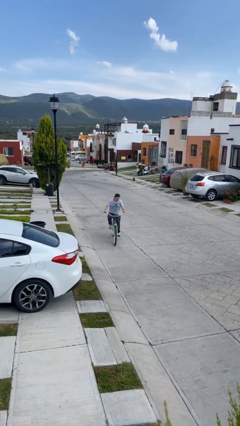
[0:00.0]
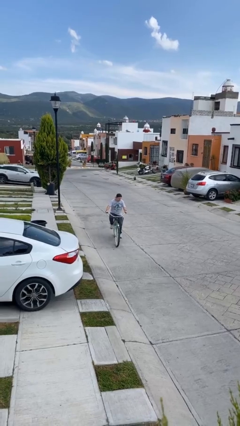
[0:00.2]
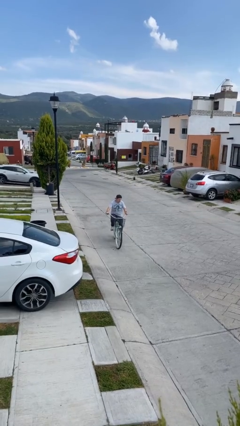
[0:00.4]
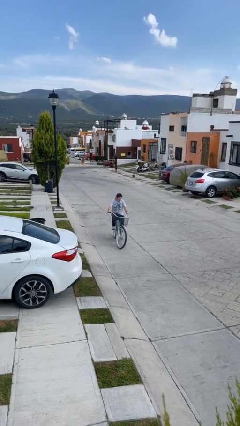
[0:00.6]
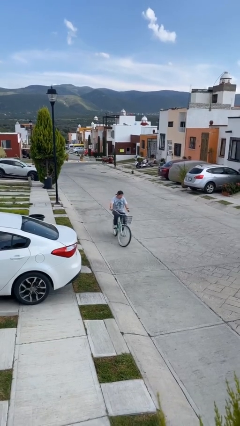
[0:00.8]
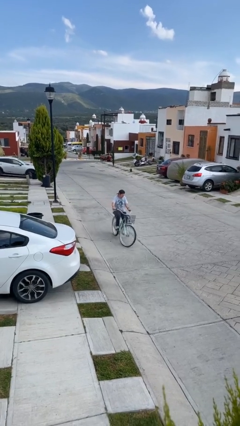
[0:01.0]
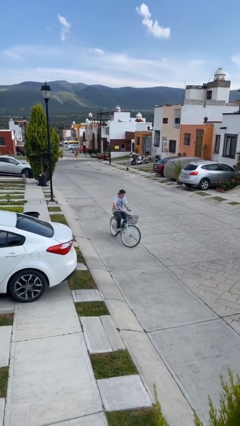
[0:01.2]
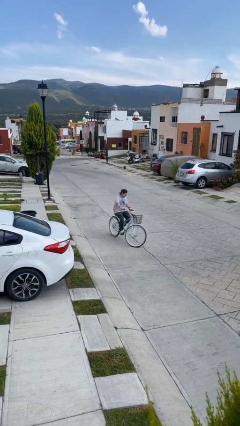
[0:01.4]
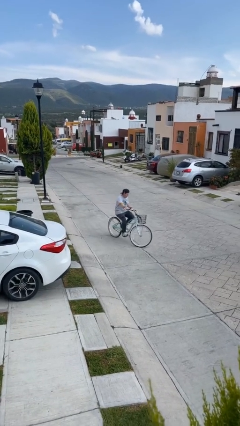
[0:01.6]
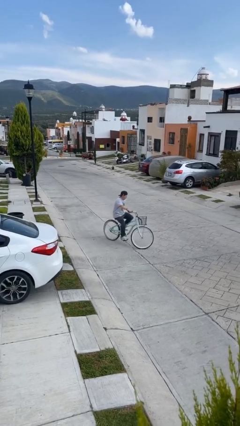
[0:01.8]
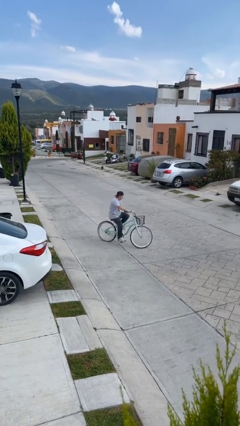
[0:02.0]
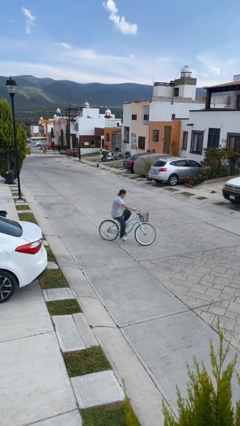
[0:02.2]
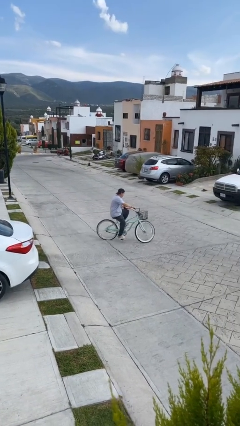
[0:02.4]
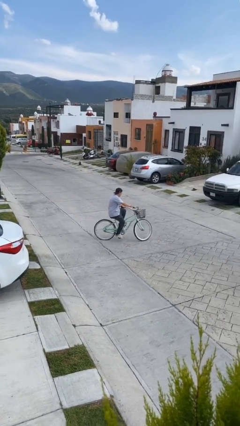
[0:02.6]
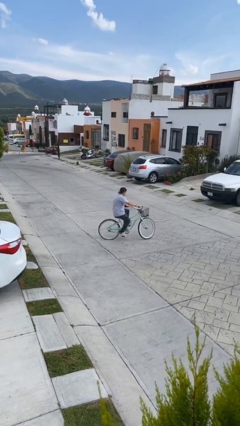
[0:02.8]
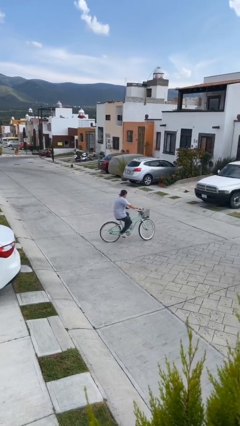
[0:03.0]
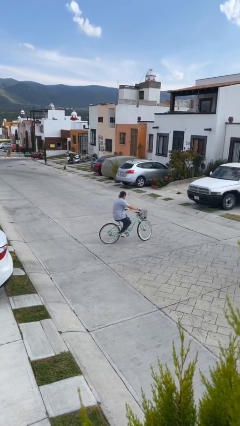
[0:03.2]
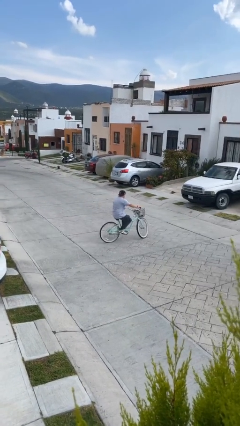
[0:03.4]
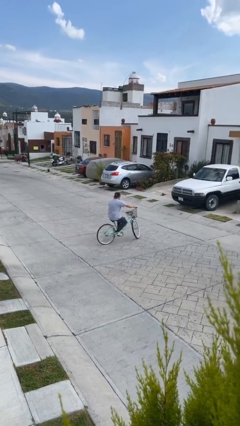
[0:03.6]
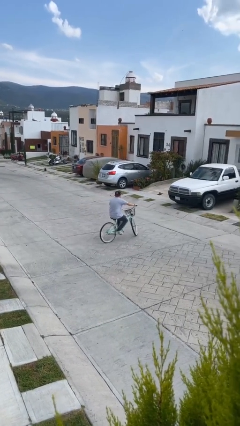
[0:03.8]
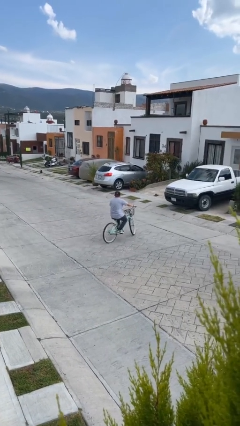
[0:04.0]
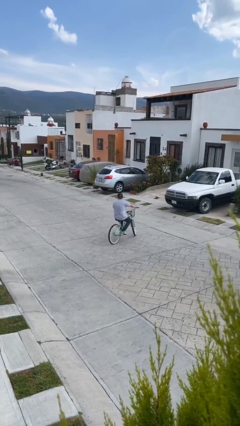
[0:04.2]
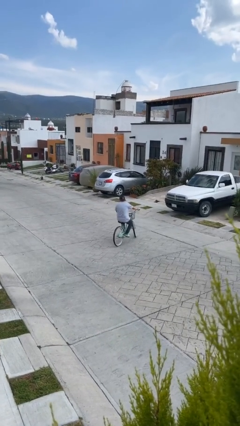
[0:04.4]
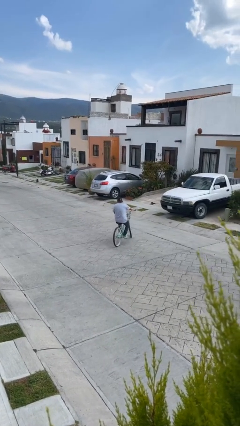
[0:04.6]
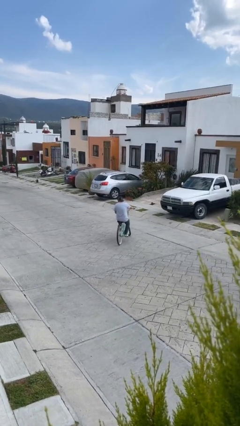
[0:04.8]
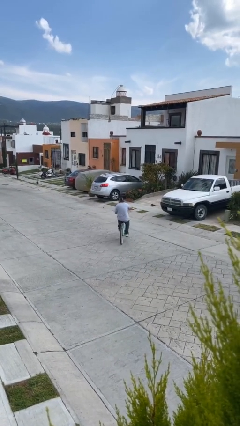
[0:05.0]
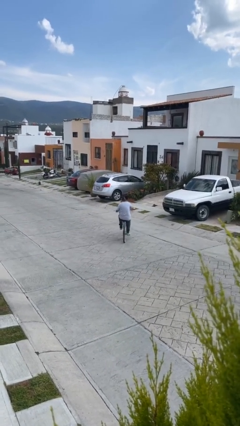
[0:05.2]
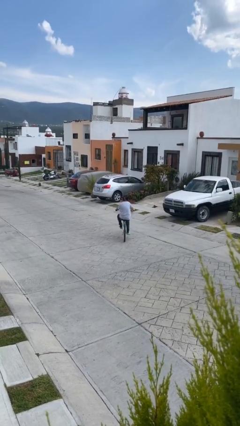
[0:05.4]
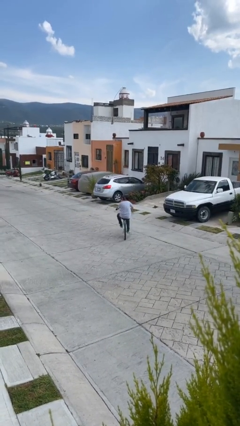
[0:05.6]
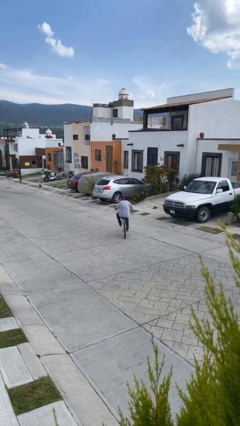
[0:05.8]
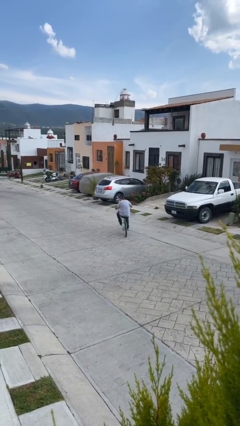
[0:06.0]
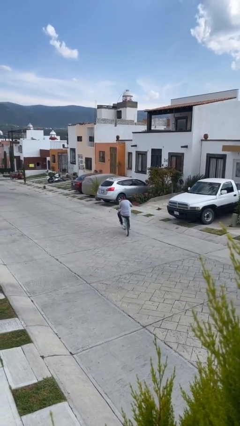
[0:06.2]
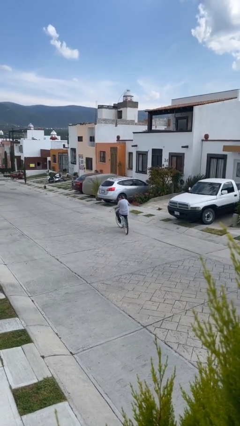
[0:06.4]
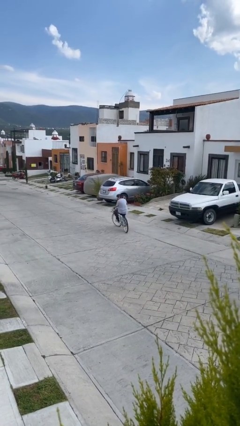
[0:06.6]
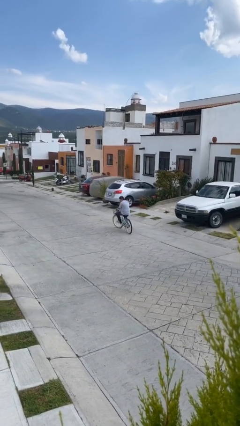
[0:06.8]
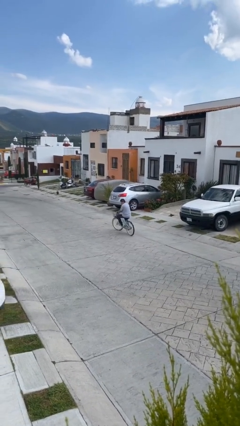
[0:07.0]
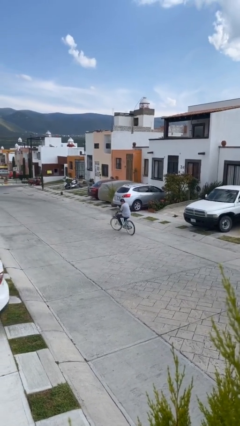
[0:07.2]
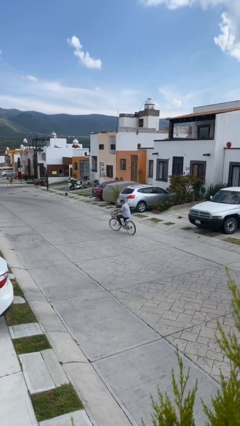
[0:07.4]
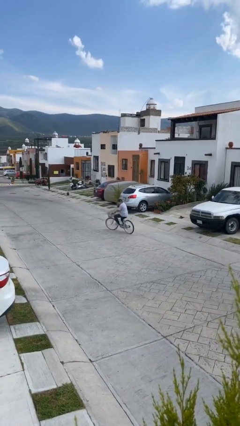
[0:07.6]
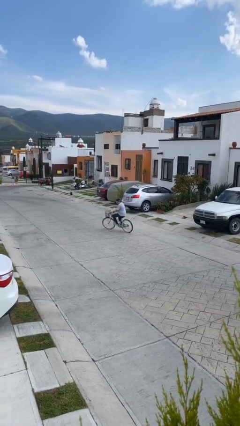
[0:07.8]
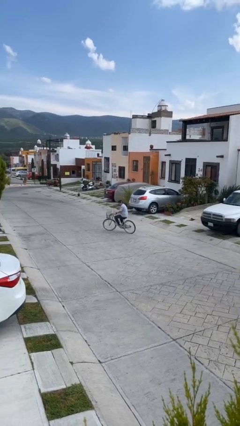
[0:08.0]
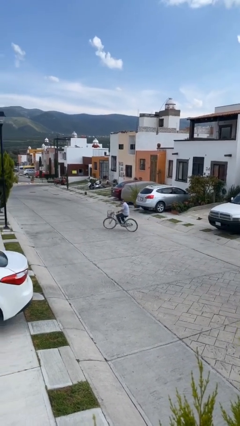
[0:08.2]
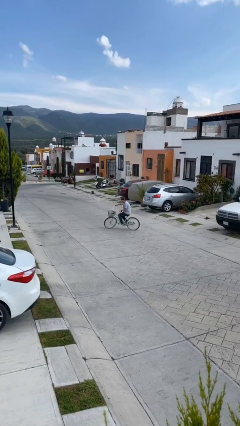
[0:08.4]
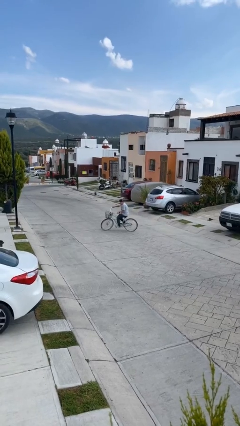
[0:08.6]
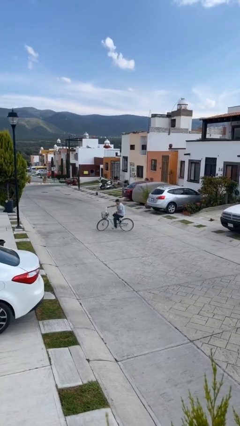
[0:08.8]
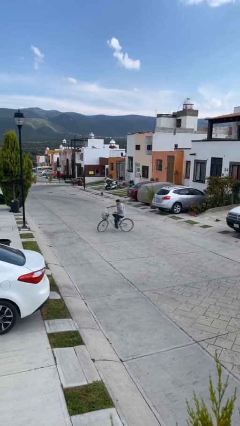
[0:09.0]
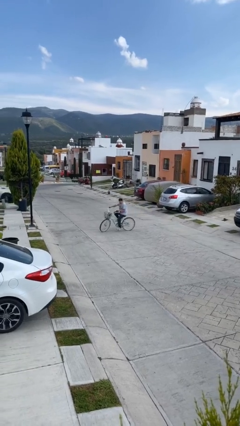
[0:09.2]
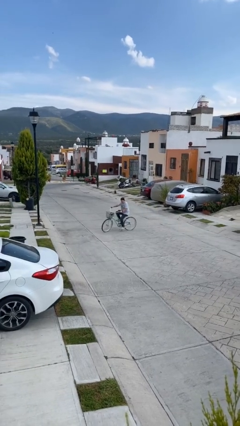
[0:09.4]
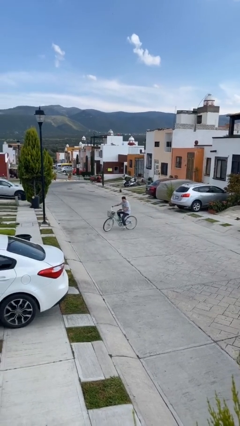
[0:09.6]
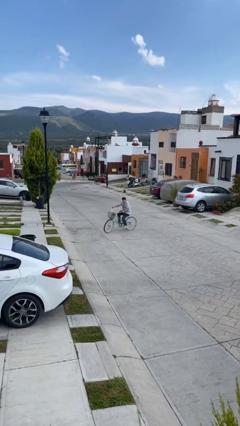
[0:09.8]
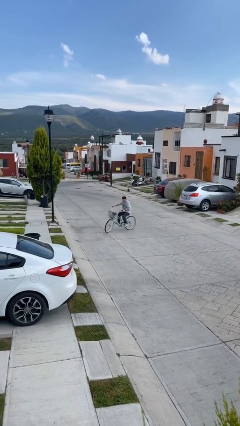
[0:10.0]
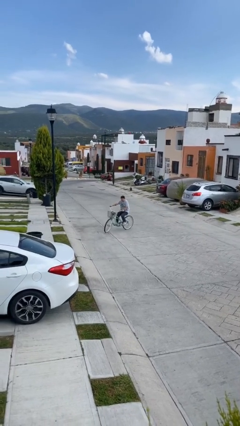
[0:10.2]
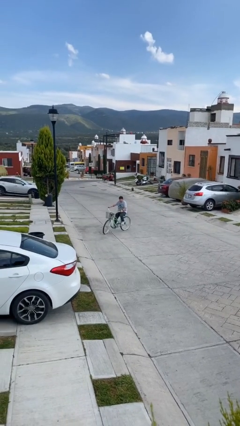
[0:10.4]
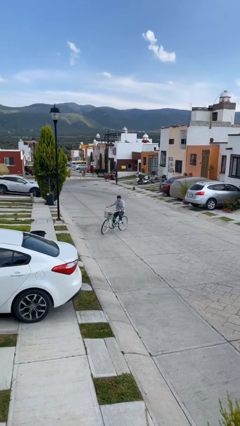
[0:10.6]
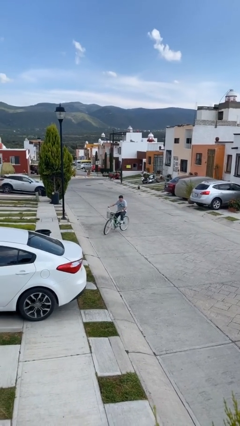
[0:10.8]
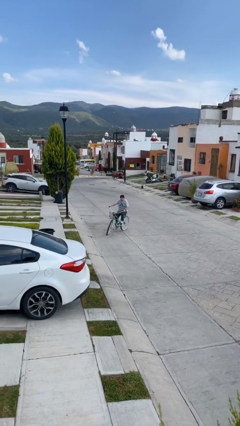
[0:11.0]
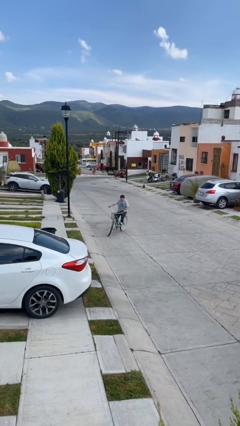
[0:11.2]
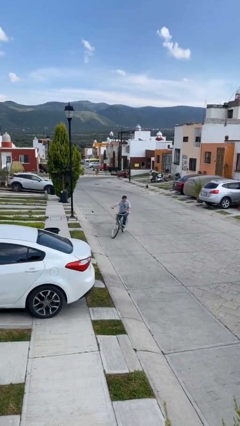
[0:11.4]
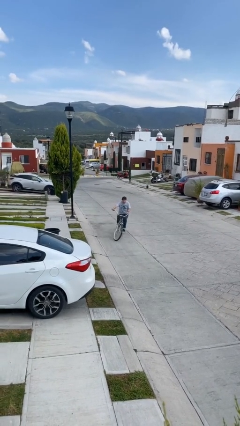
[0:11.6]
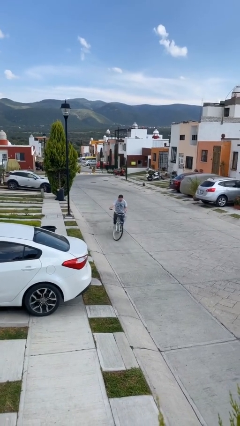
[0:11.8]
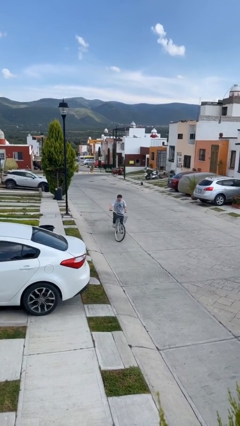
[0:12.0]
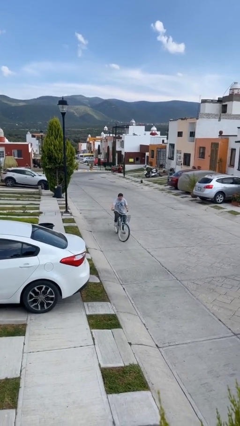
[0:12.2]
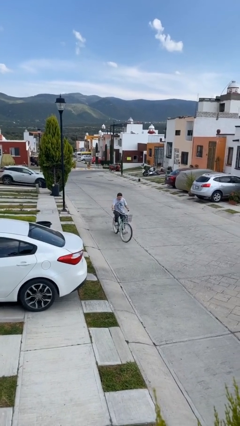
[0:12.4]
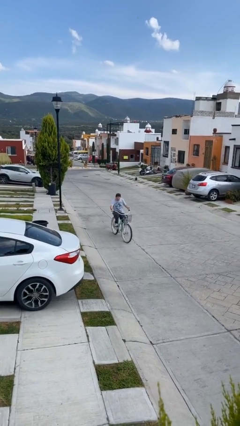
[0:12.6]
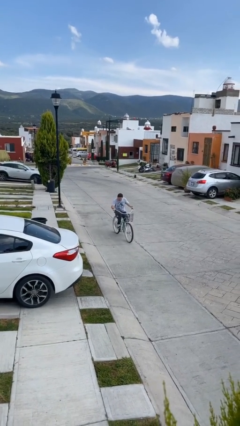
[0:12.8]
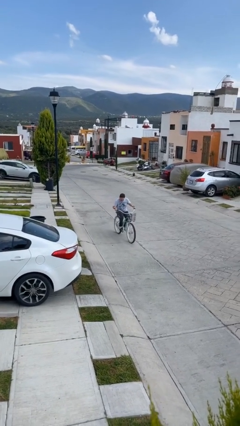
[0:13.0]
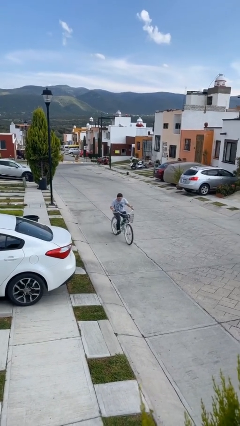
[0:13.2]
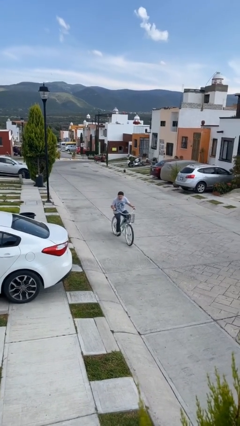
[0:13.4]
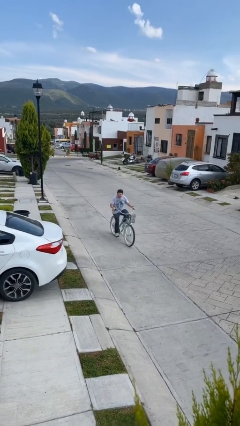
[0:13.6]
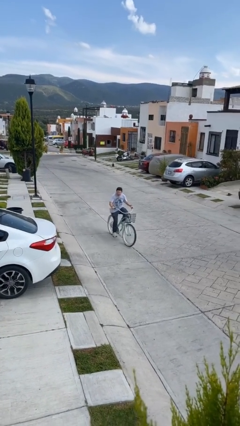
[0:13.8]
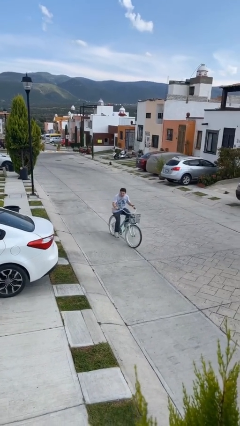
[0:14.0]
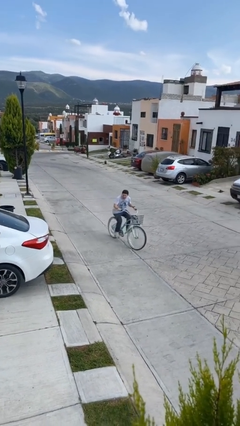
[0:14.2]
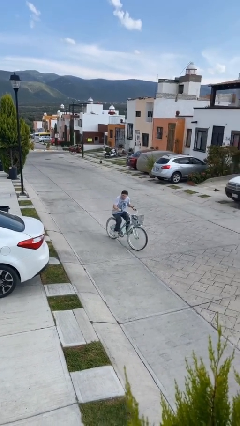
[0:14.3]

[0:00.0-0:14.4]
person rides bicycle

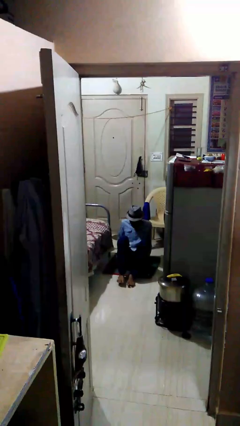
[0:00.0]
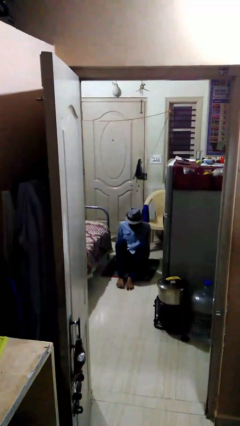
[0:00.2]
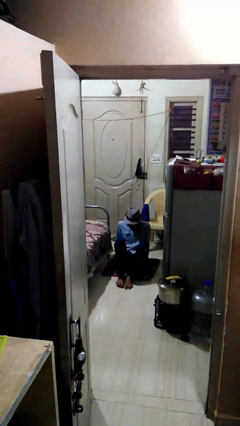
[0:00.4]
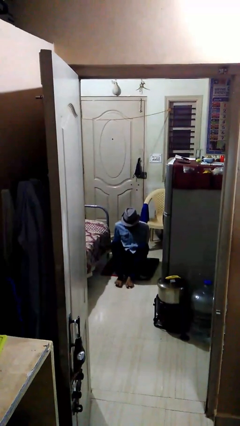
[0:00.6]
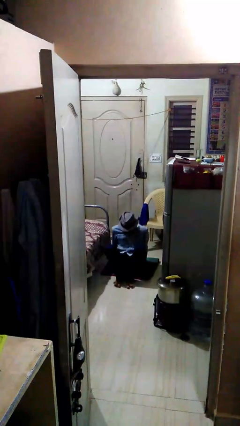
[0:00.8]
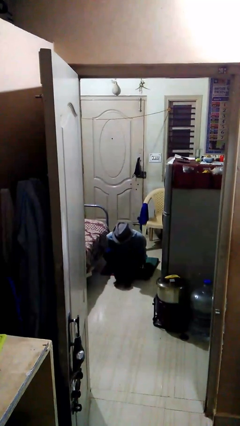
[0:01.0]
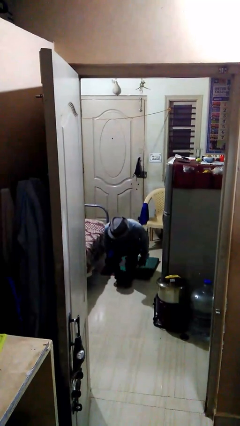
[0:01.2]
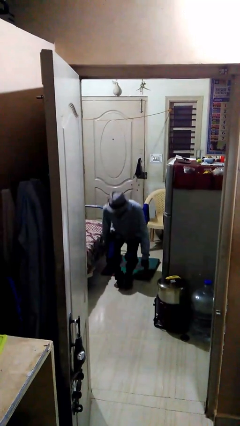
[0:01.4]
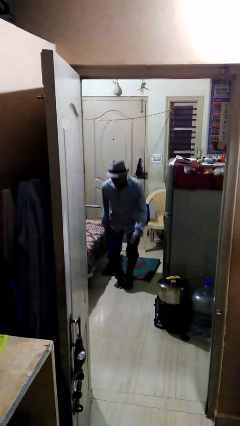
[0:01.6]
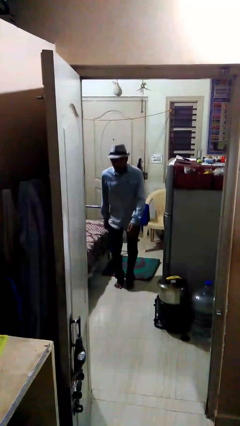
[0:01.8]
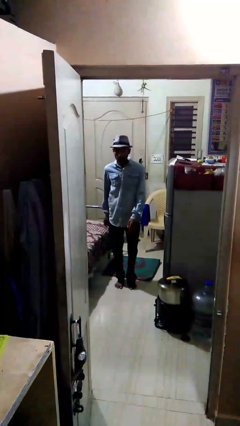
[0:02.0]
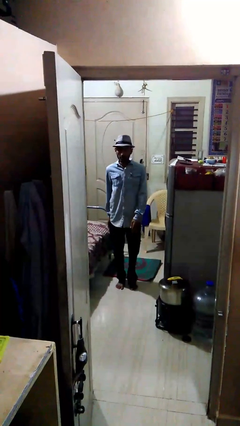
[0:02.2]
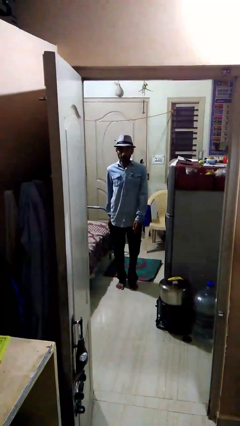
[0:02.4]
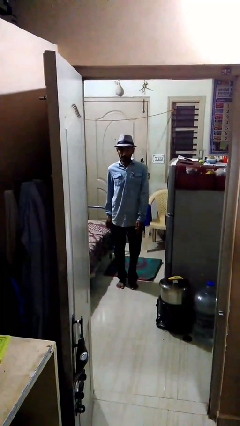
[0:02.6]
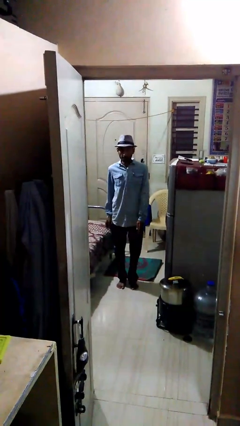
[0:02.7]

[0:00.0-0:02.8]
person stands up

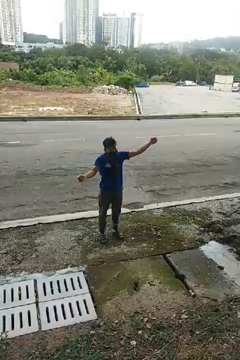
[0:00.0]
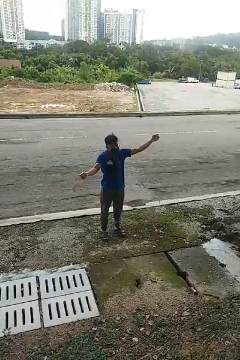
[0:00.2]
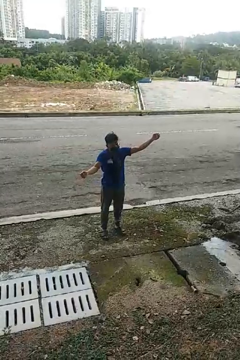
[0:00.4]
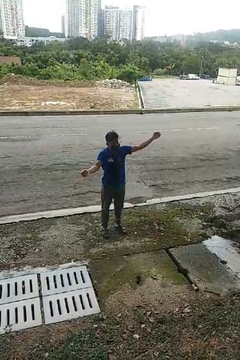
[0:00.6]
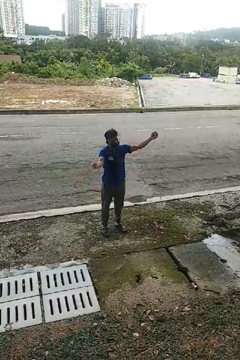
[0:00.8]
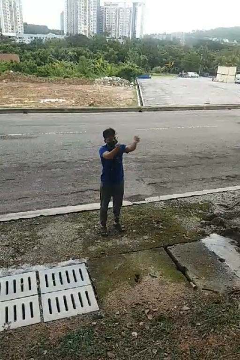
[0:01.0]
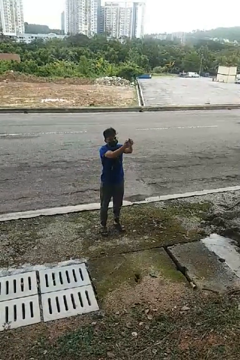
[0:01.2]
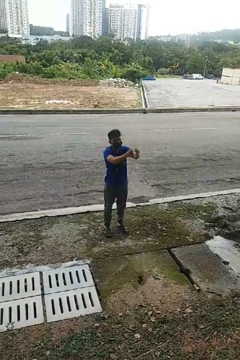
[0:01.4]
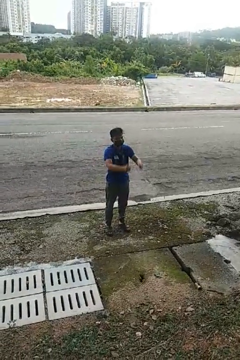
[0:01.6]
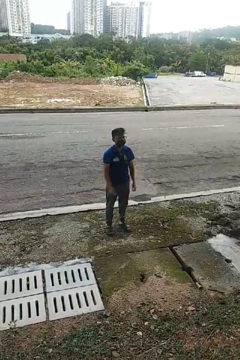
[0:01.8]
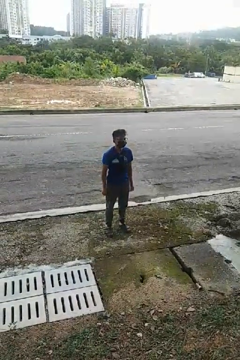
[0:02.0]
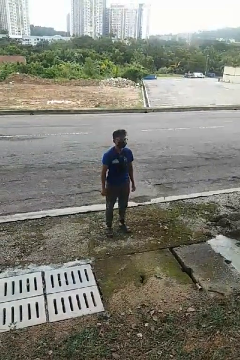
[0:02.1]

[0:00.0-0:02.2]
person gestures zoom out
